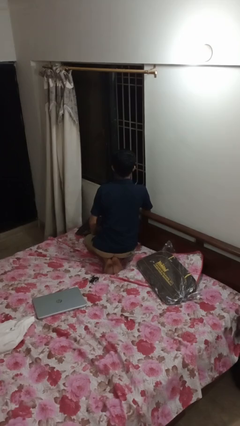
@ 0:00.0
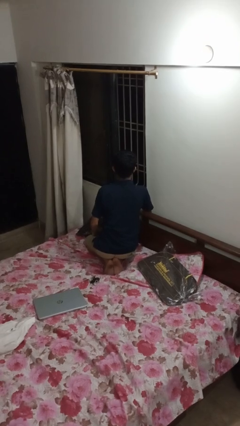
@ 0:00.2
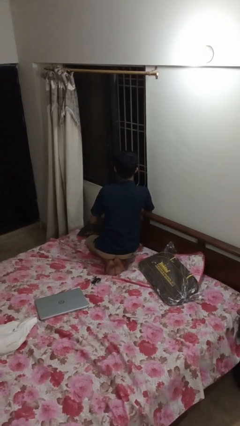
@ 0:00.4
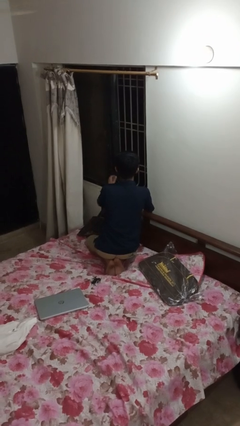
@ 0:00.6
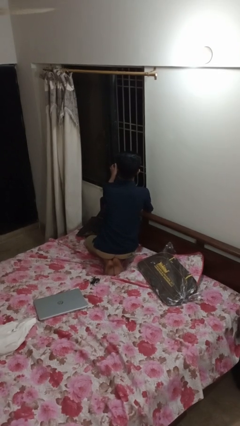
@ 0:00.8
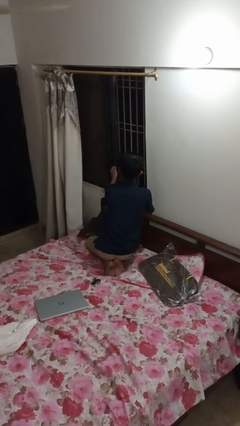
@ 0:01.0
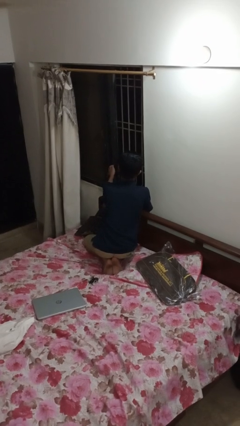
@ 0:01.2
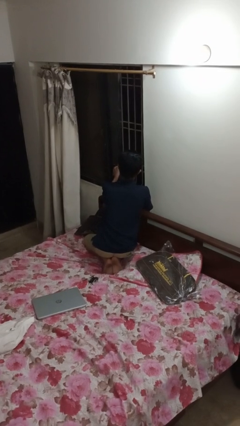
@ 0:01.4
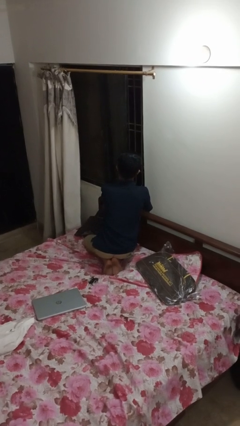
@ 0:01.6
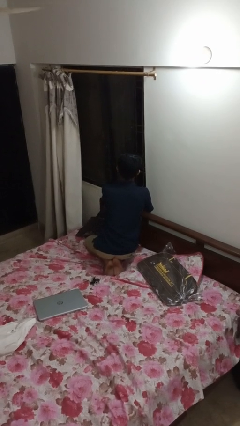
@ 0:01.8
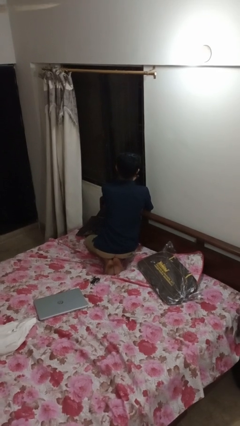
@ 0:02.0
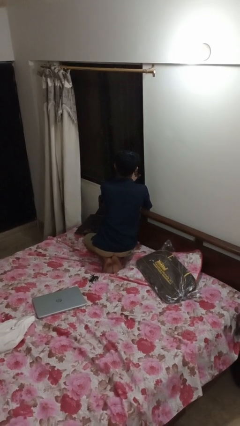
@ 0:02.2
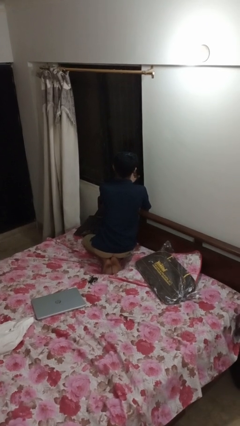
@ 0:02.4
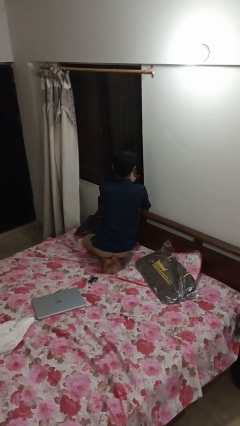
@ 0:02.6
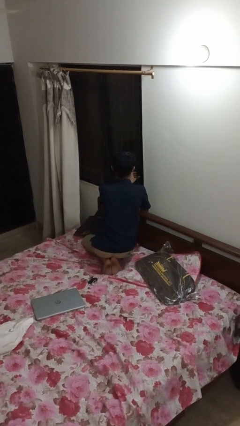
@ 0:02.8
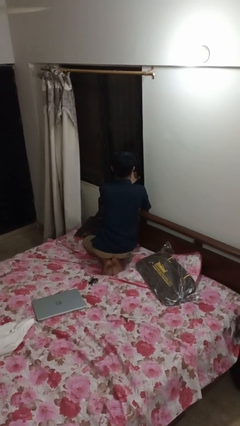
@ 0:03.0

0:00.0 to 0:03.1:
person closes home window

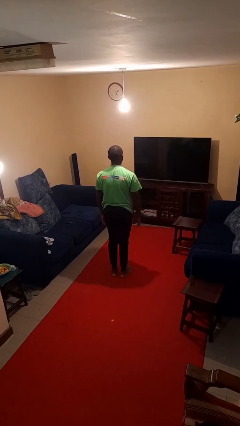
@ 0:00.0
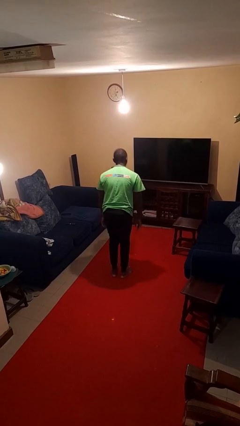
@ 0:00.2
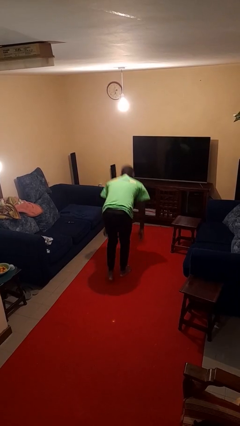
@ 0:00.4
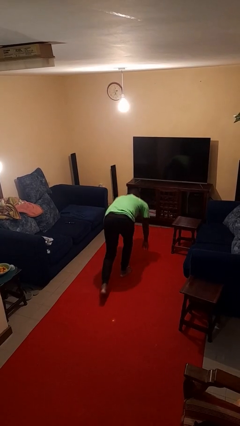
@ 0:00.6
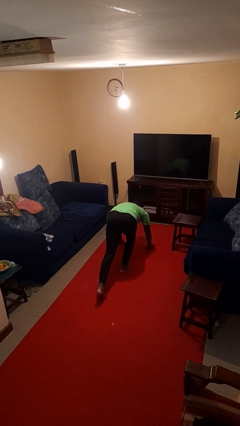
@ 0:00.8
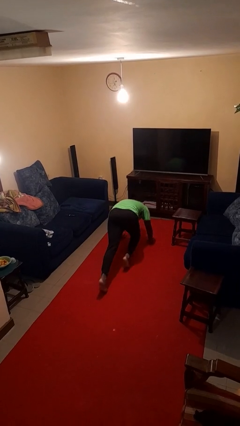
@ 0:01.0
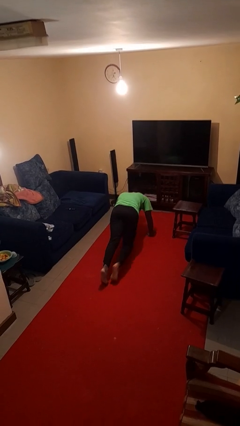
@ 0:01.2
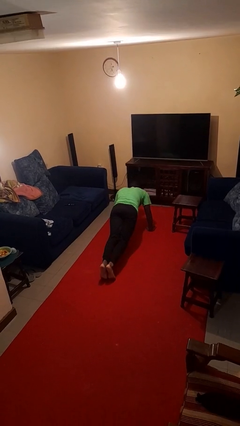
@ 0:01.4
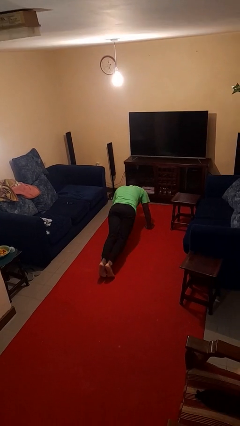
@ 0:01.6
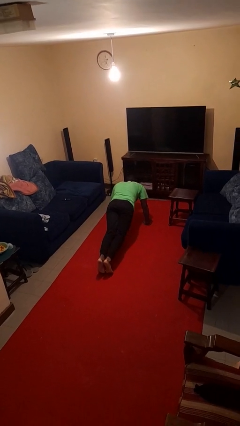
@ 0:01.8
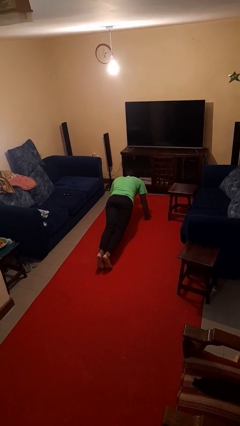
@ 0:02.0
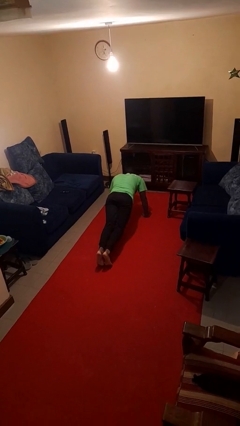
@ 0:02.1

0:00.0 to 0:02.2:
person exercises with plank

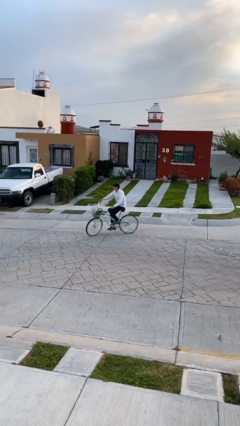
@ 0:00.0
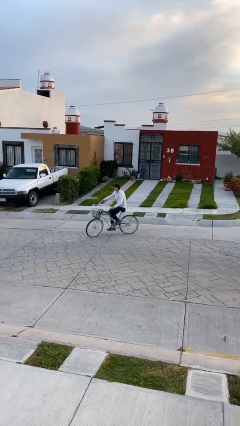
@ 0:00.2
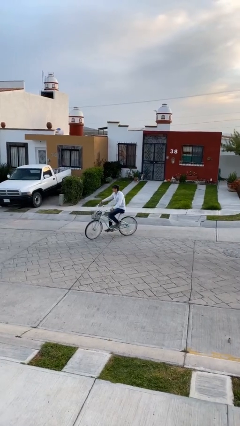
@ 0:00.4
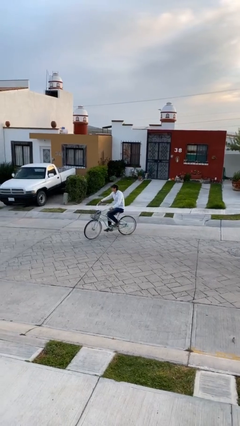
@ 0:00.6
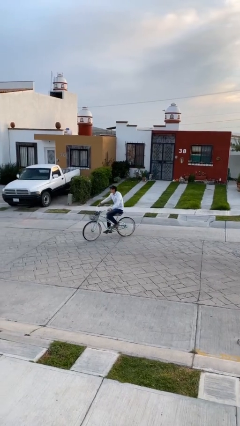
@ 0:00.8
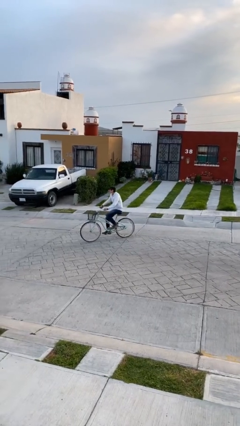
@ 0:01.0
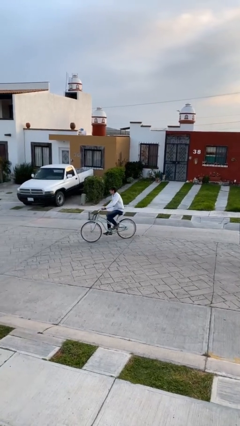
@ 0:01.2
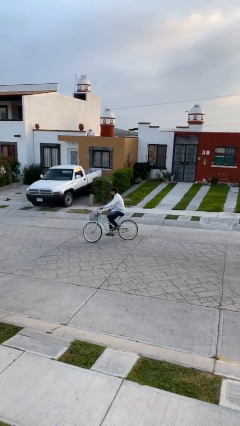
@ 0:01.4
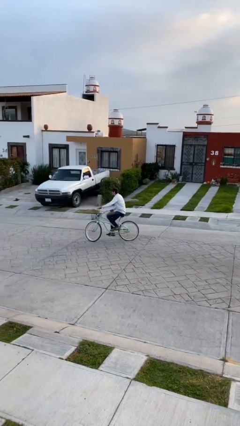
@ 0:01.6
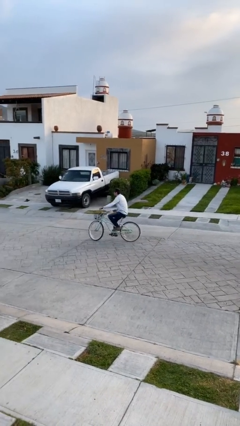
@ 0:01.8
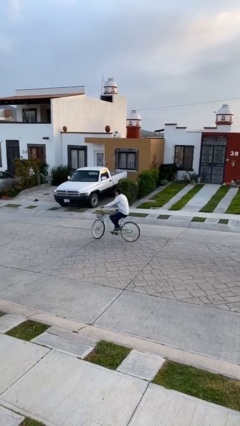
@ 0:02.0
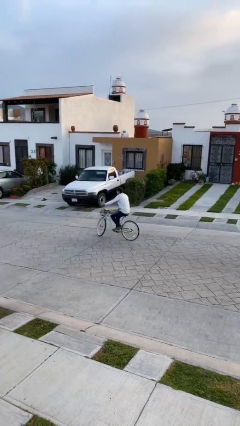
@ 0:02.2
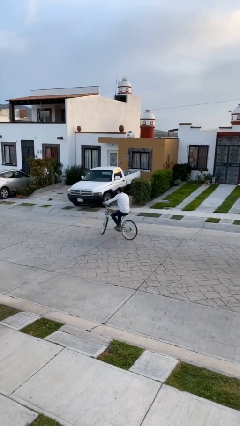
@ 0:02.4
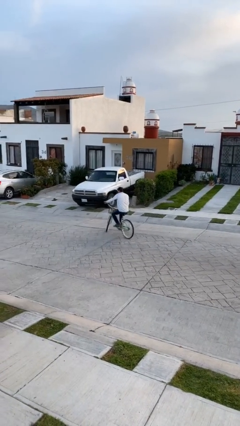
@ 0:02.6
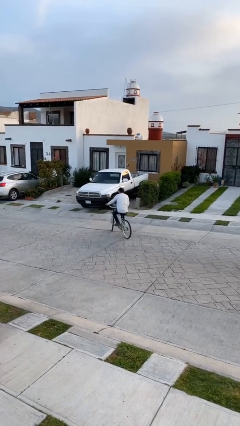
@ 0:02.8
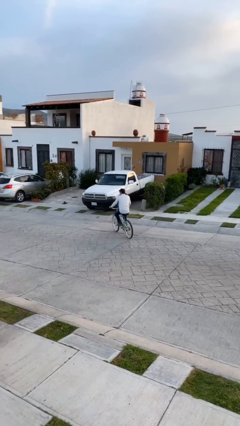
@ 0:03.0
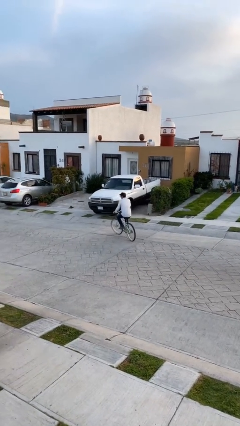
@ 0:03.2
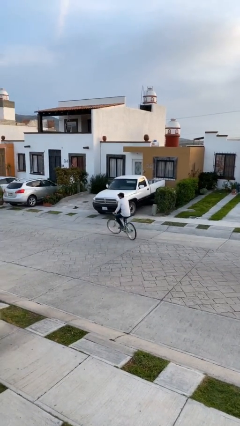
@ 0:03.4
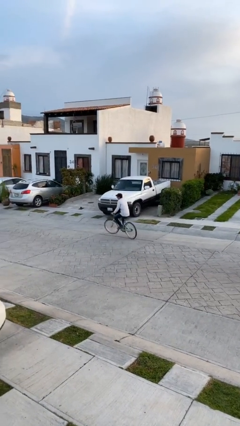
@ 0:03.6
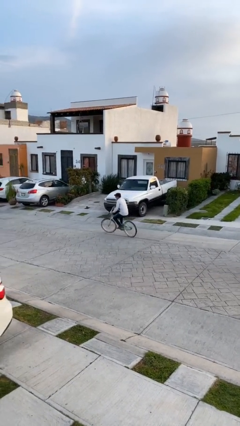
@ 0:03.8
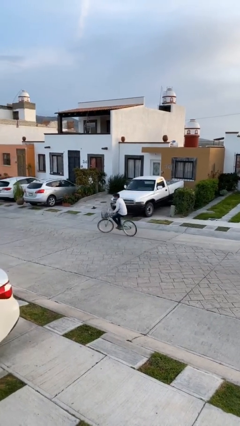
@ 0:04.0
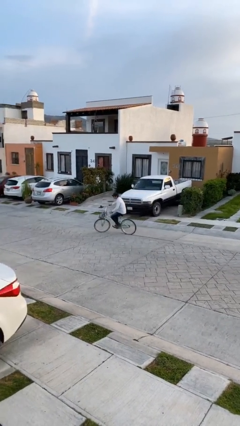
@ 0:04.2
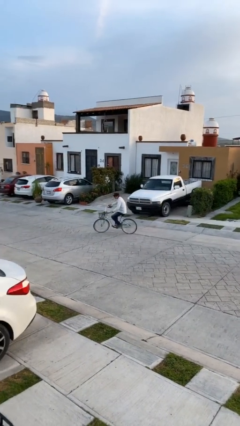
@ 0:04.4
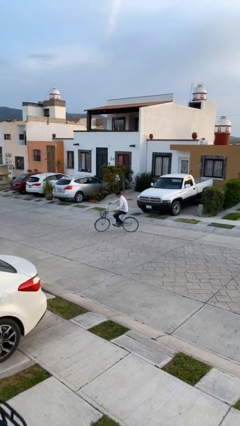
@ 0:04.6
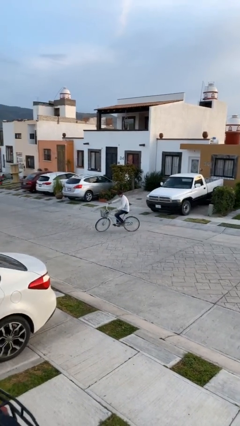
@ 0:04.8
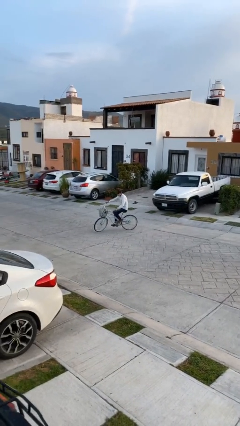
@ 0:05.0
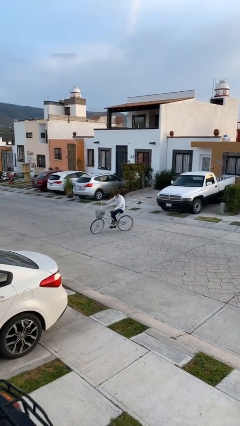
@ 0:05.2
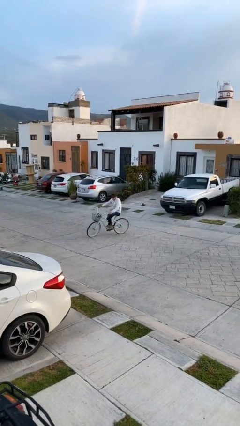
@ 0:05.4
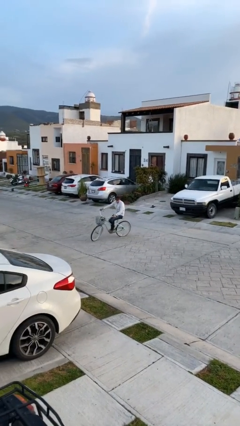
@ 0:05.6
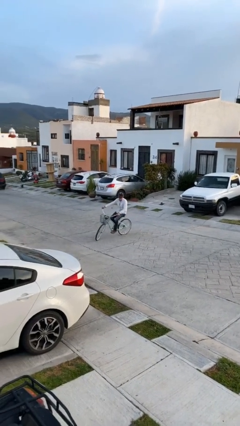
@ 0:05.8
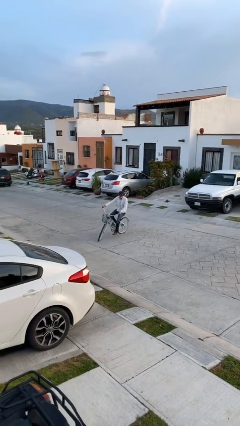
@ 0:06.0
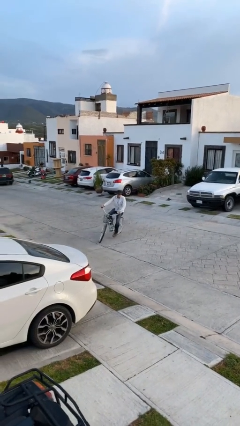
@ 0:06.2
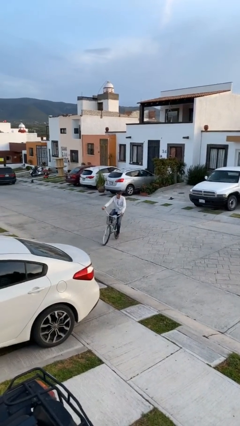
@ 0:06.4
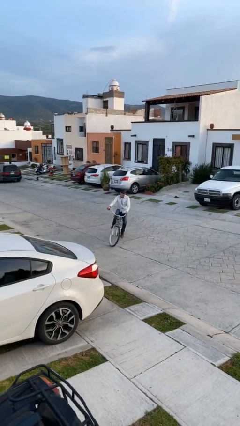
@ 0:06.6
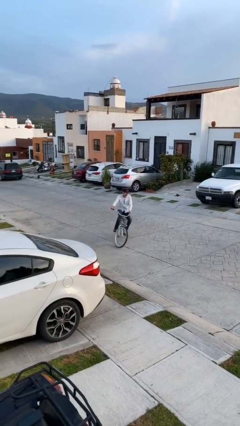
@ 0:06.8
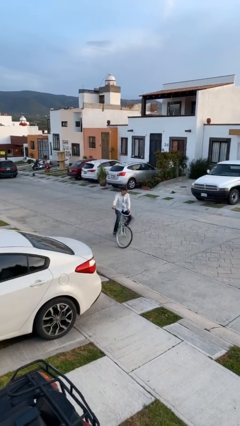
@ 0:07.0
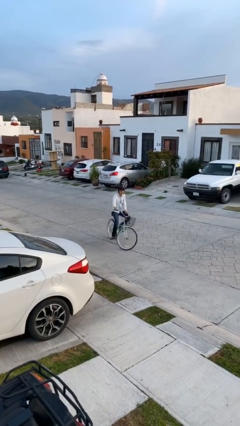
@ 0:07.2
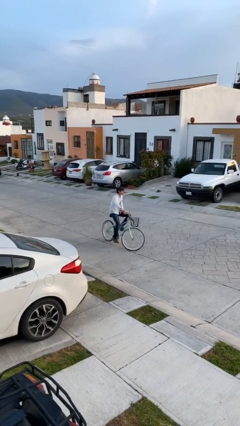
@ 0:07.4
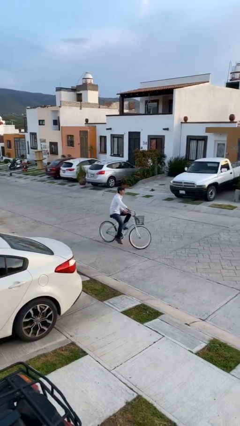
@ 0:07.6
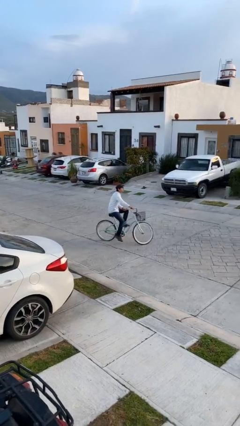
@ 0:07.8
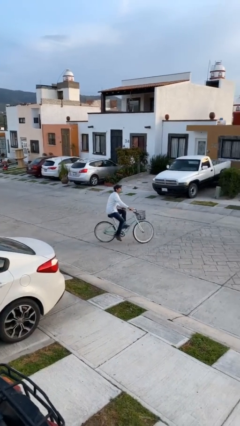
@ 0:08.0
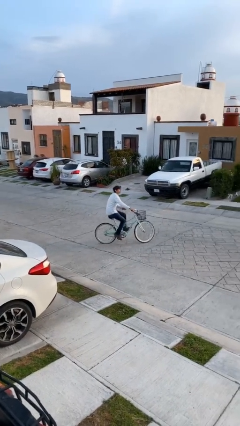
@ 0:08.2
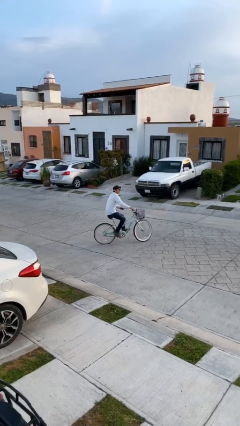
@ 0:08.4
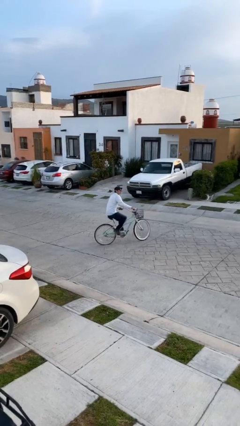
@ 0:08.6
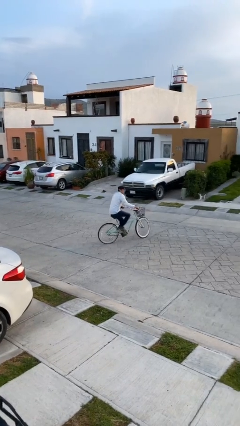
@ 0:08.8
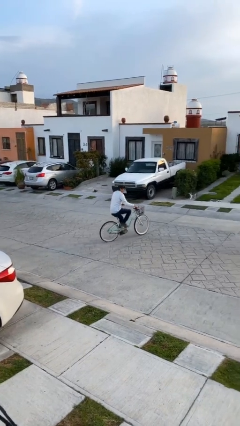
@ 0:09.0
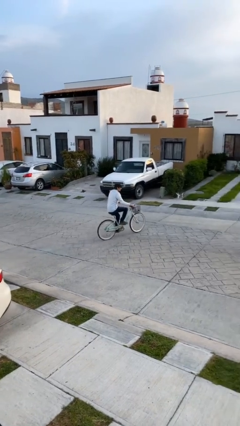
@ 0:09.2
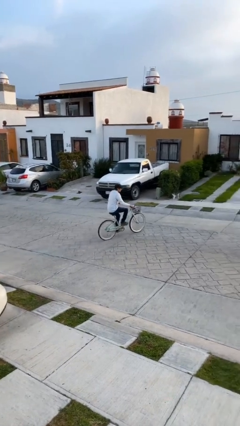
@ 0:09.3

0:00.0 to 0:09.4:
person rides bicycle

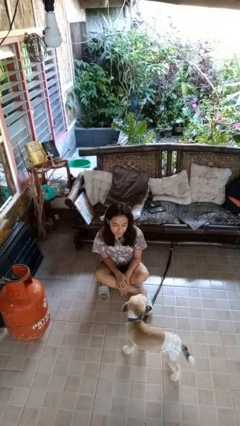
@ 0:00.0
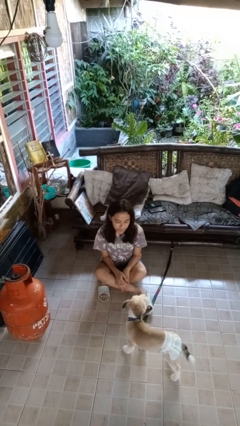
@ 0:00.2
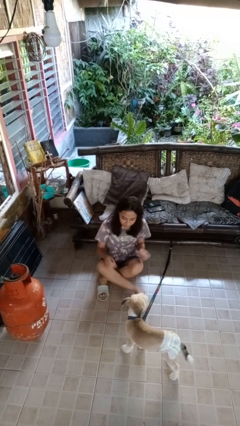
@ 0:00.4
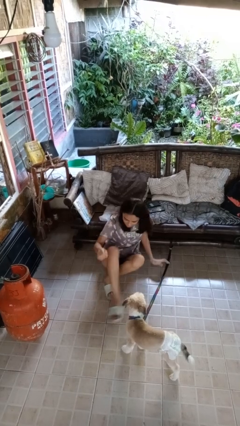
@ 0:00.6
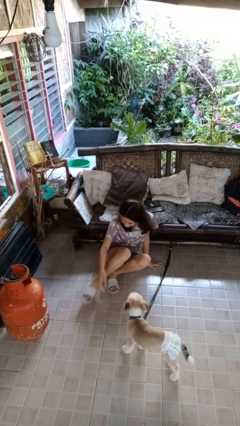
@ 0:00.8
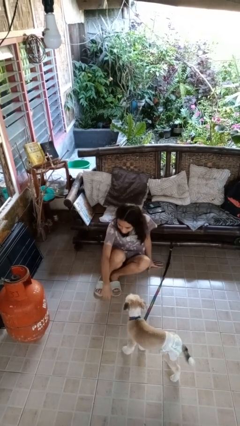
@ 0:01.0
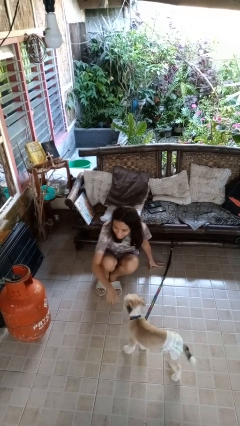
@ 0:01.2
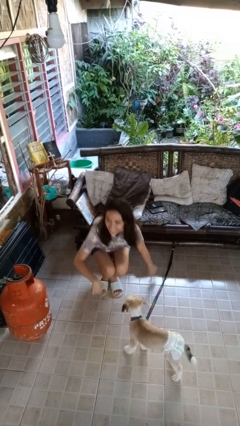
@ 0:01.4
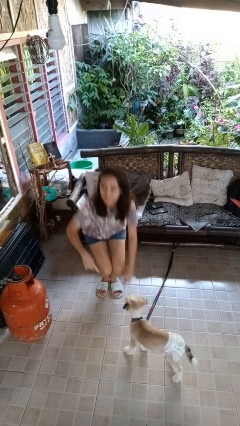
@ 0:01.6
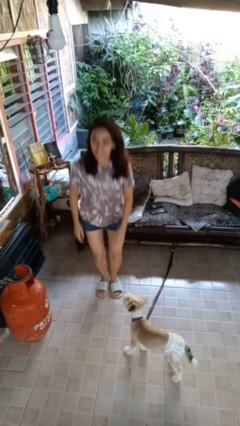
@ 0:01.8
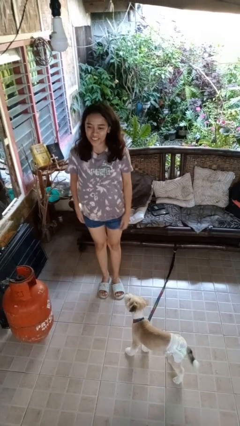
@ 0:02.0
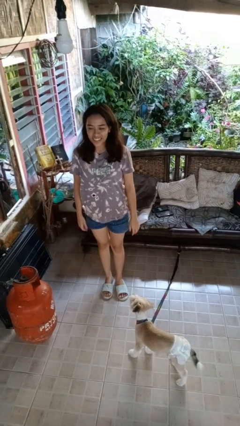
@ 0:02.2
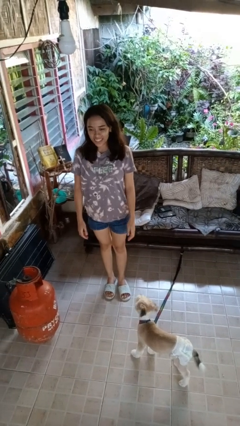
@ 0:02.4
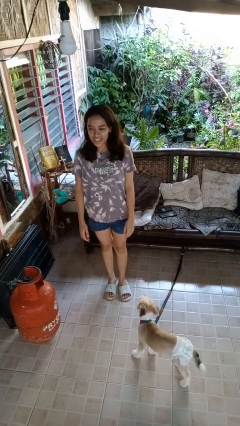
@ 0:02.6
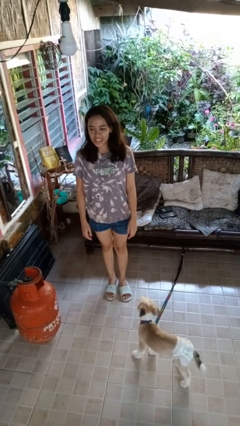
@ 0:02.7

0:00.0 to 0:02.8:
person stands up from floor
